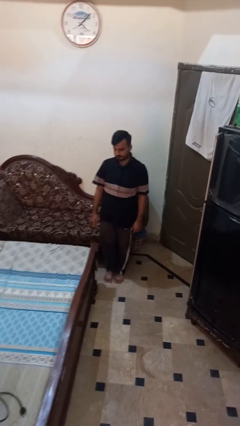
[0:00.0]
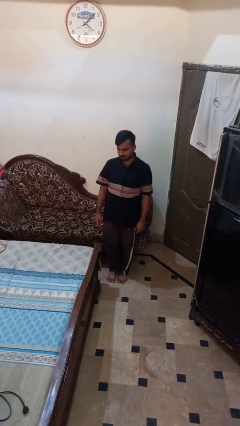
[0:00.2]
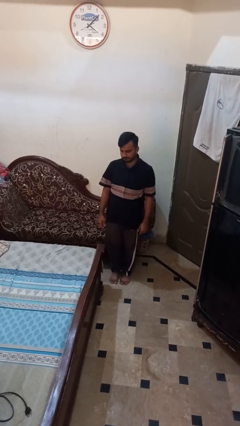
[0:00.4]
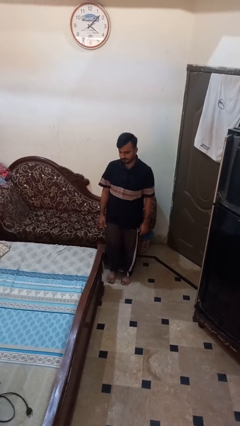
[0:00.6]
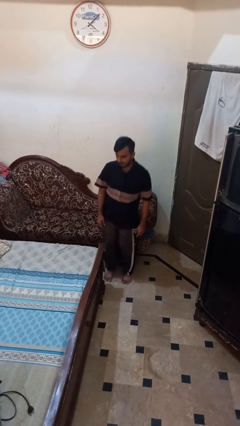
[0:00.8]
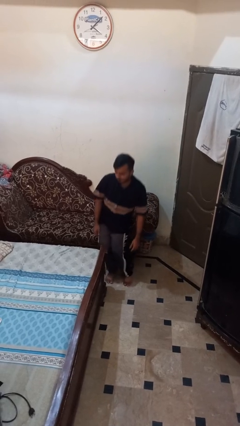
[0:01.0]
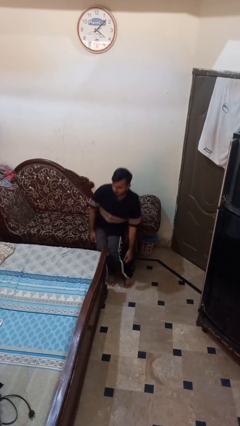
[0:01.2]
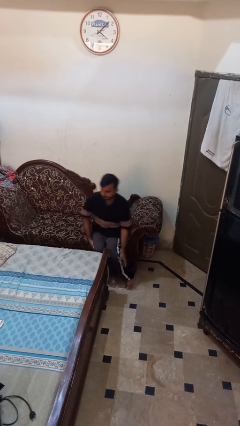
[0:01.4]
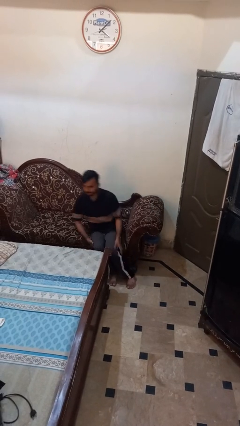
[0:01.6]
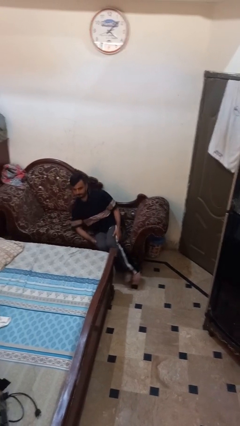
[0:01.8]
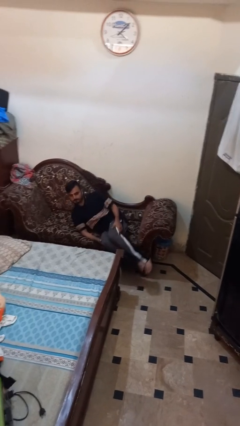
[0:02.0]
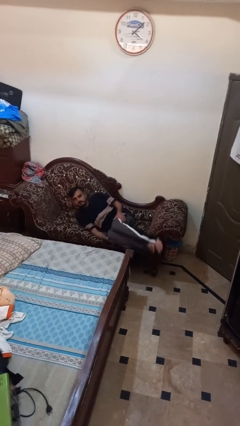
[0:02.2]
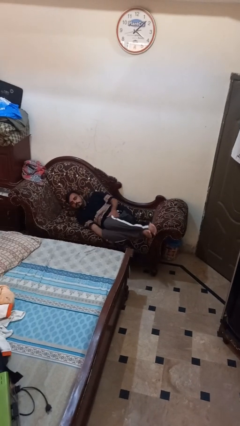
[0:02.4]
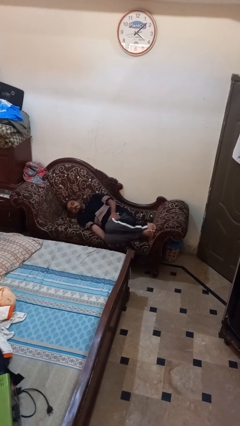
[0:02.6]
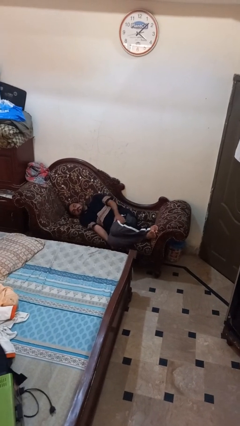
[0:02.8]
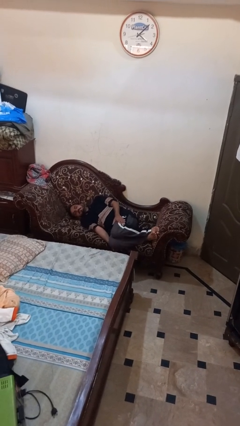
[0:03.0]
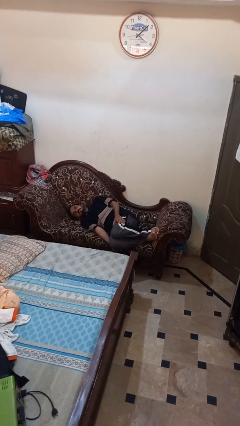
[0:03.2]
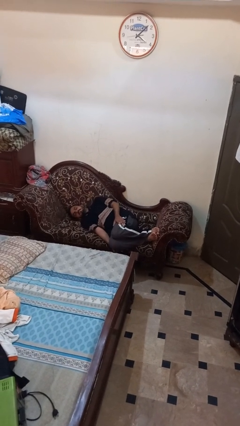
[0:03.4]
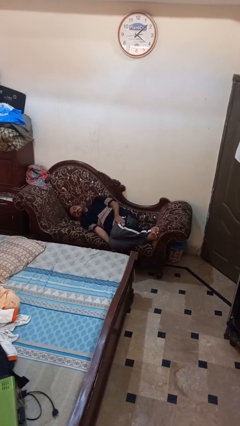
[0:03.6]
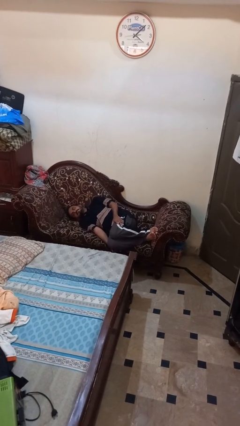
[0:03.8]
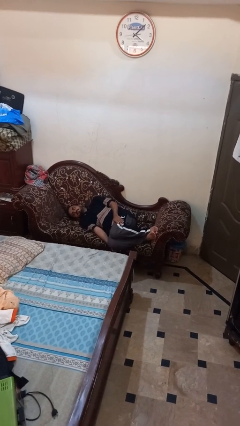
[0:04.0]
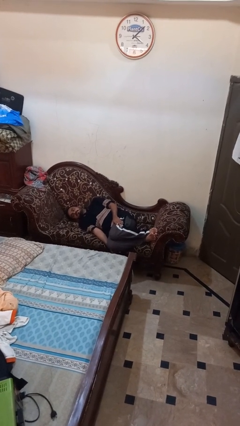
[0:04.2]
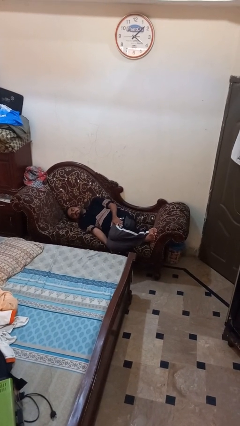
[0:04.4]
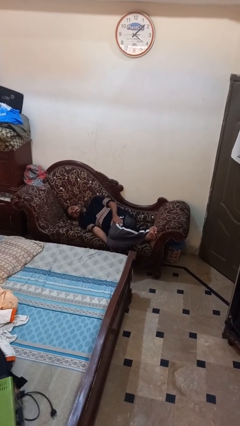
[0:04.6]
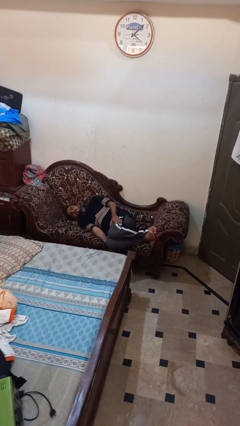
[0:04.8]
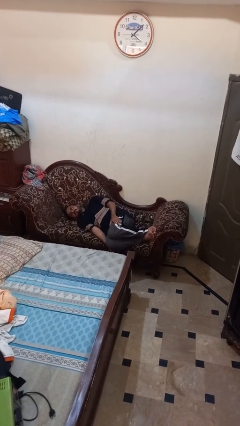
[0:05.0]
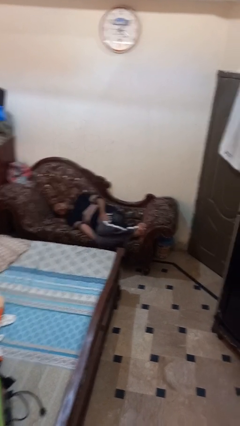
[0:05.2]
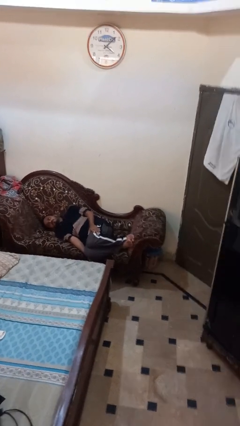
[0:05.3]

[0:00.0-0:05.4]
person lies down on couch

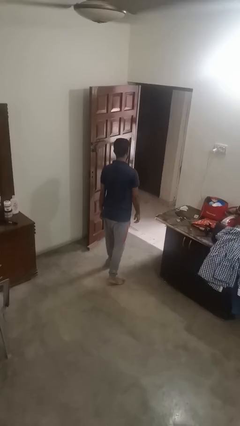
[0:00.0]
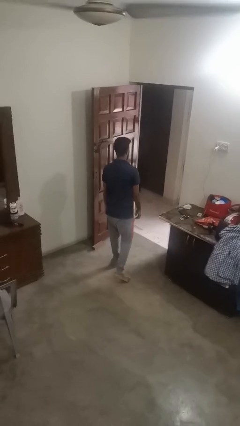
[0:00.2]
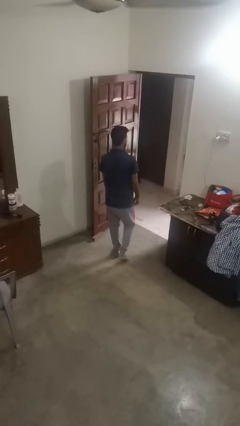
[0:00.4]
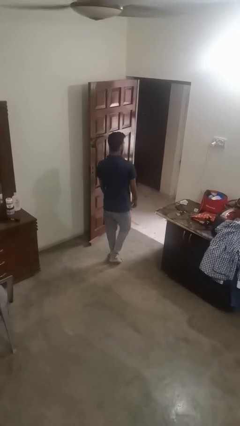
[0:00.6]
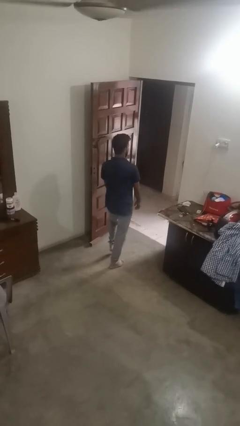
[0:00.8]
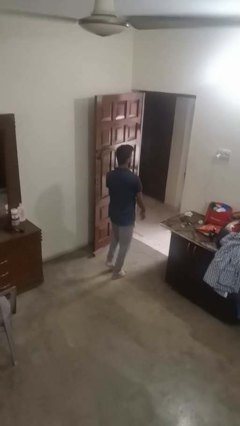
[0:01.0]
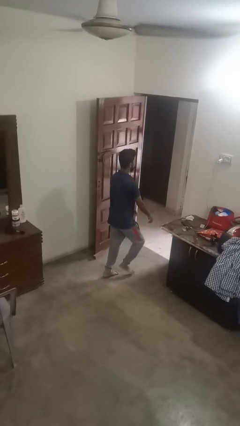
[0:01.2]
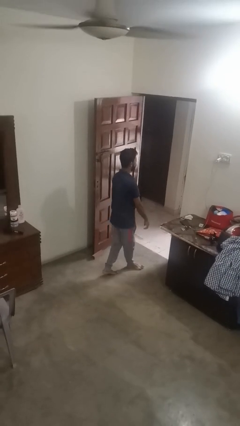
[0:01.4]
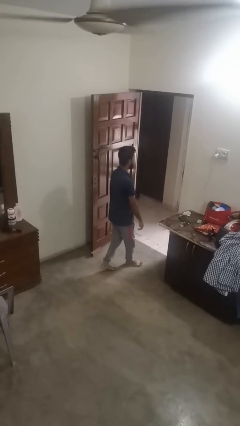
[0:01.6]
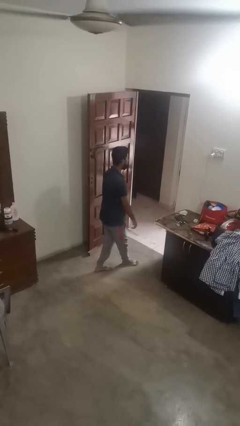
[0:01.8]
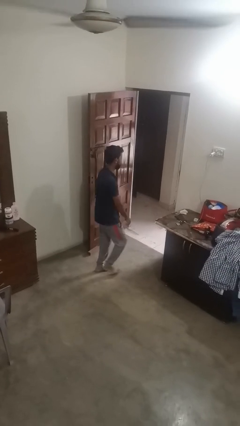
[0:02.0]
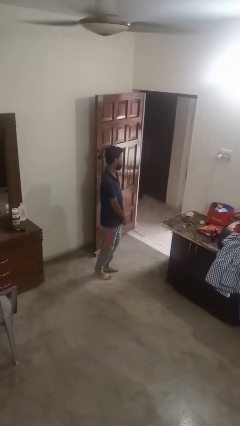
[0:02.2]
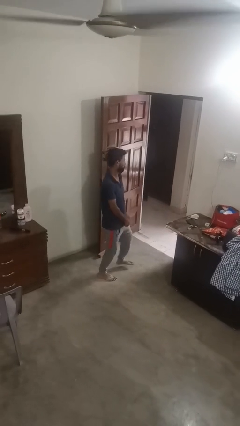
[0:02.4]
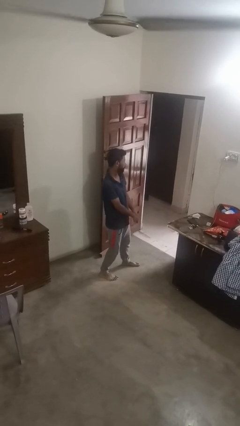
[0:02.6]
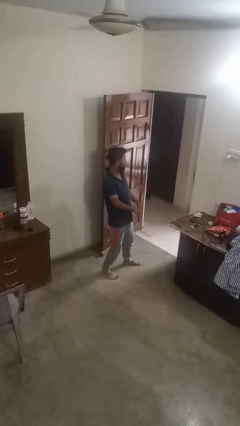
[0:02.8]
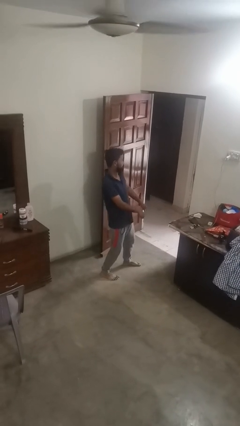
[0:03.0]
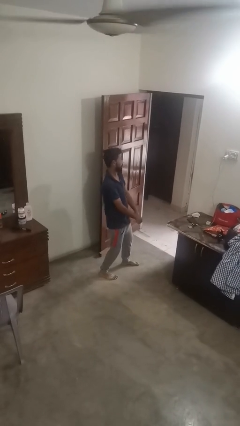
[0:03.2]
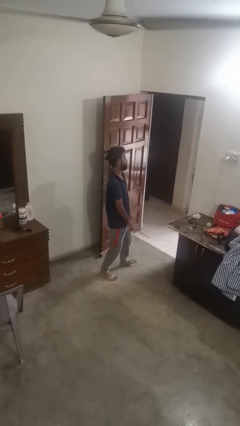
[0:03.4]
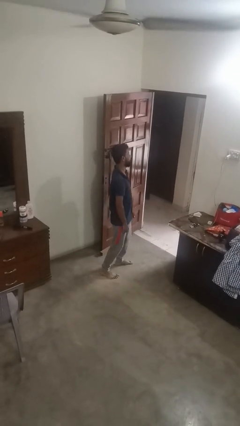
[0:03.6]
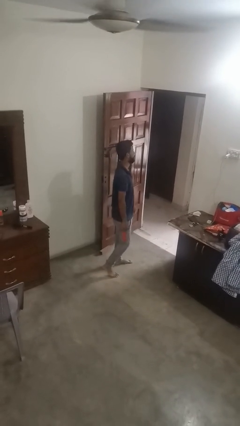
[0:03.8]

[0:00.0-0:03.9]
person dances in place

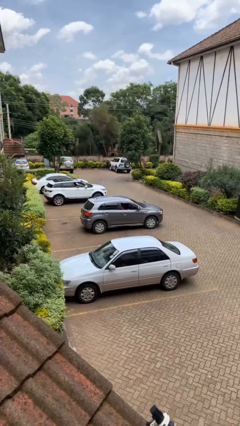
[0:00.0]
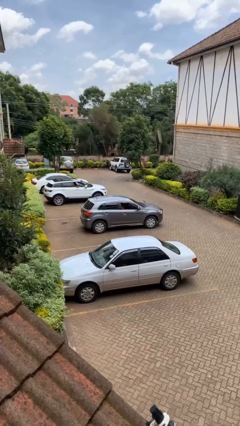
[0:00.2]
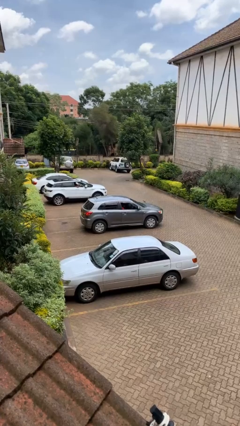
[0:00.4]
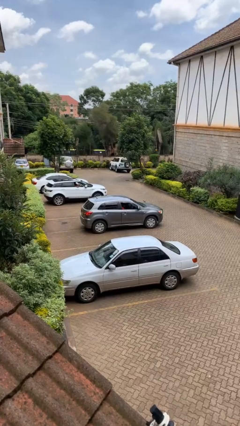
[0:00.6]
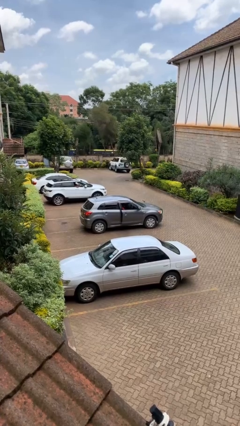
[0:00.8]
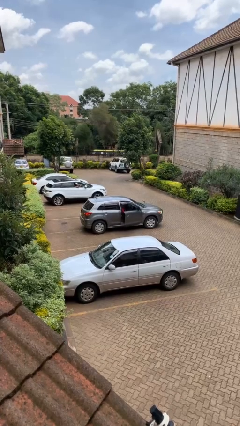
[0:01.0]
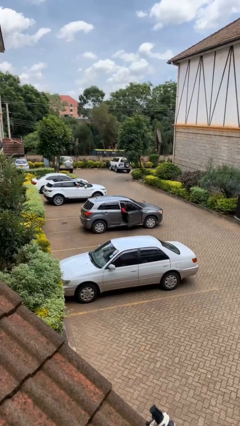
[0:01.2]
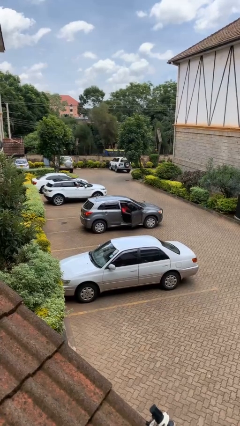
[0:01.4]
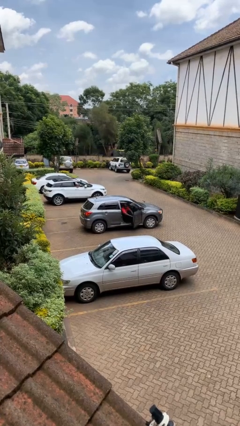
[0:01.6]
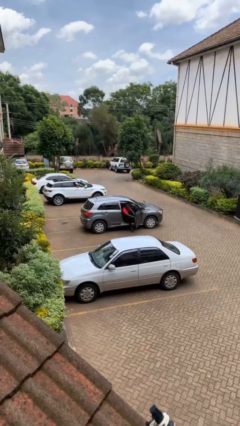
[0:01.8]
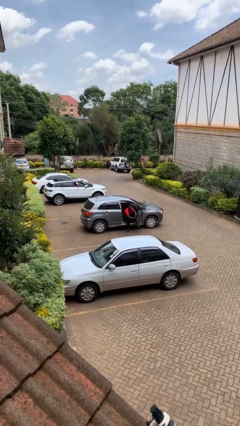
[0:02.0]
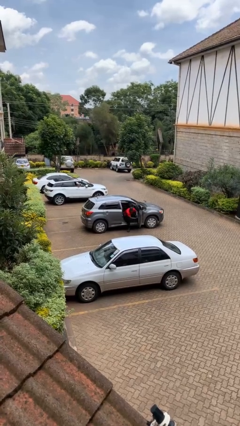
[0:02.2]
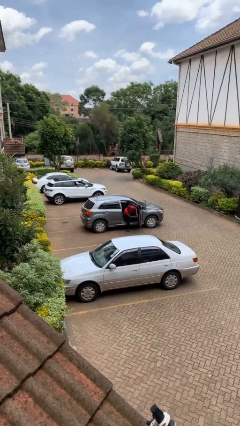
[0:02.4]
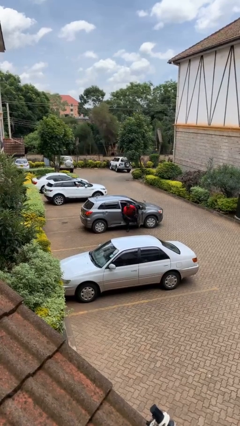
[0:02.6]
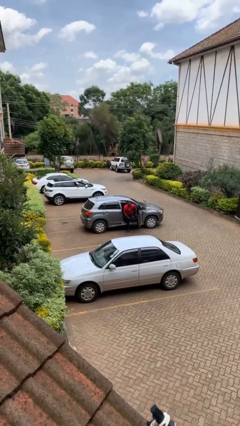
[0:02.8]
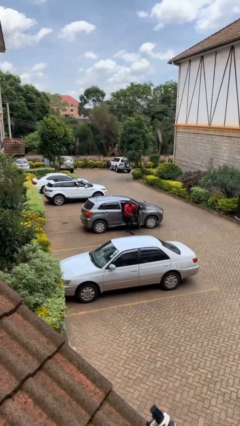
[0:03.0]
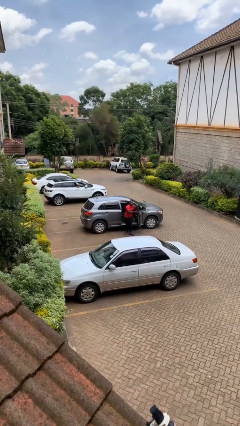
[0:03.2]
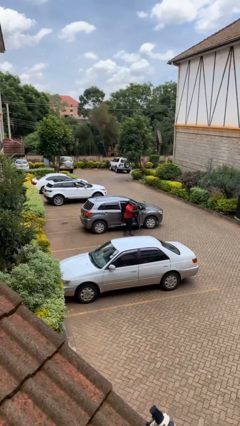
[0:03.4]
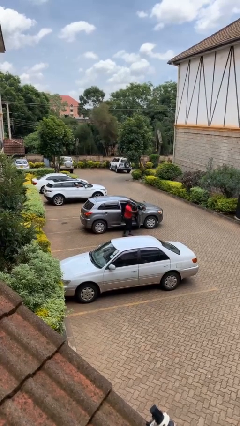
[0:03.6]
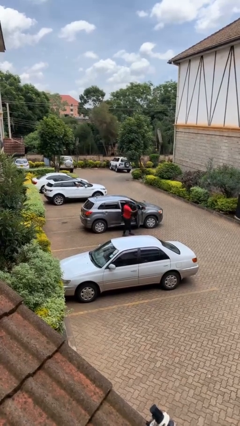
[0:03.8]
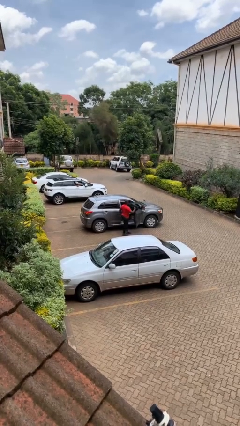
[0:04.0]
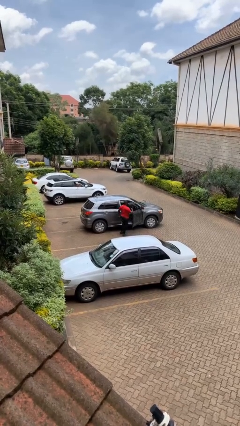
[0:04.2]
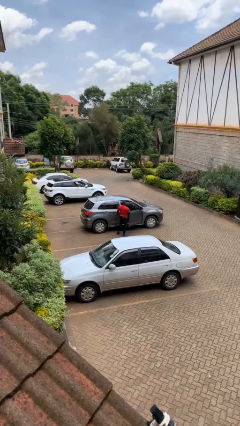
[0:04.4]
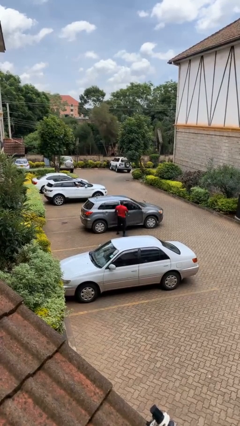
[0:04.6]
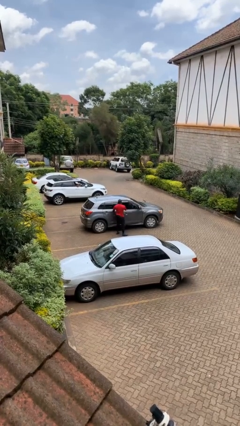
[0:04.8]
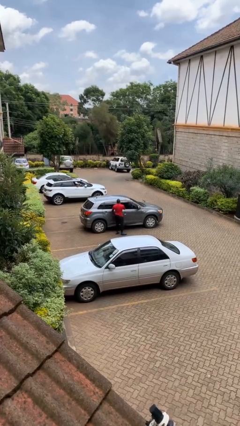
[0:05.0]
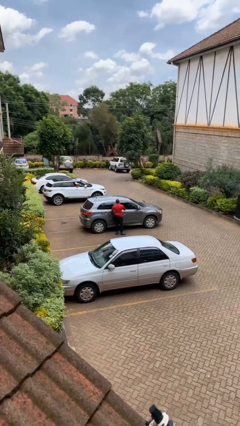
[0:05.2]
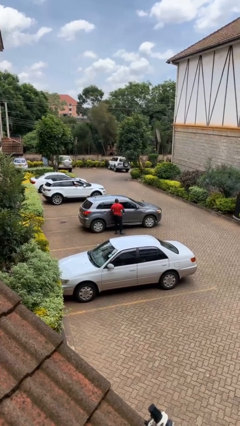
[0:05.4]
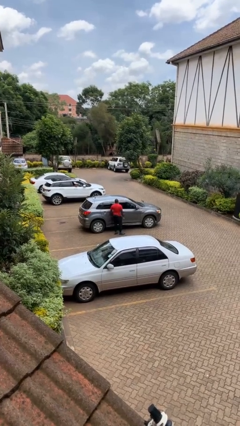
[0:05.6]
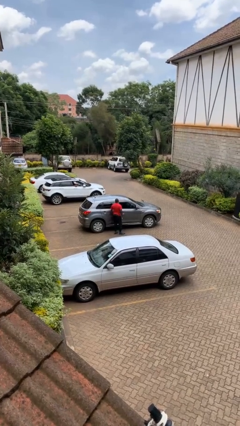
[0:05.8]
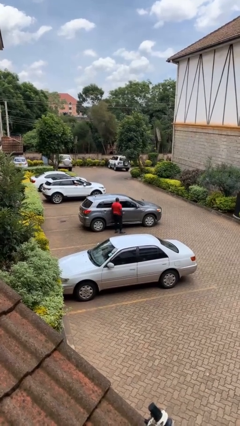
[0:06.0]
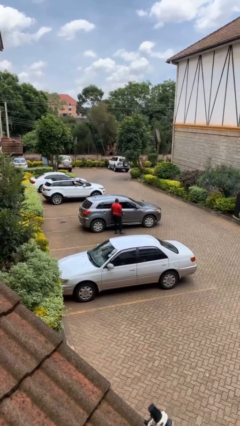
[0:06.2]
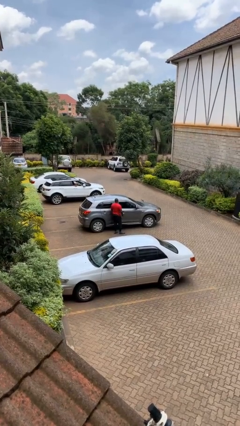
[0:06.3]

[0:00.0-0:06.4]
car drops off person

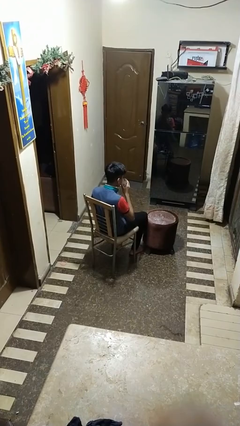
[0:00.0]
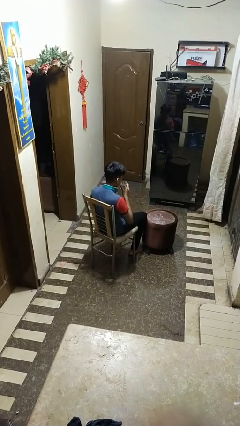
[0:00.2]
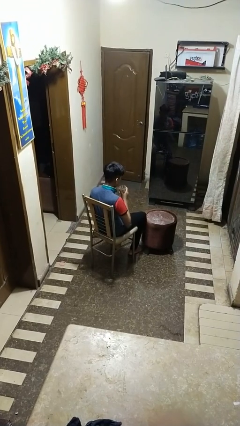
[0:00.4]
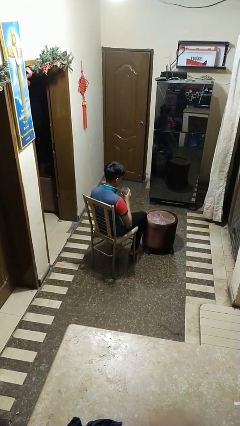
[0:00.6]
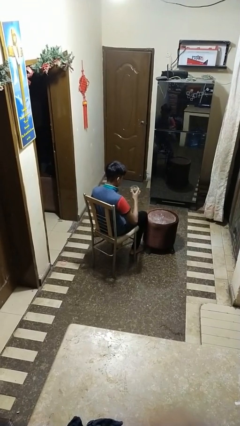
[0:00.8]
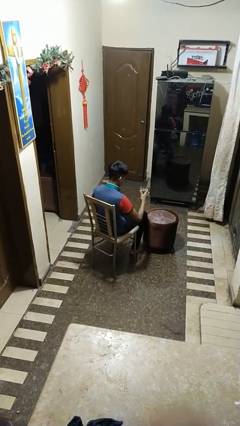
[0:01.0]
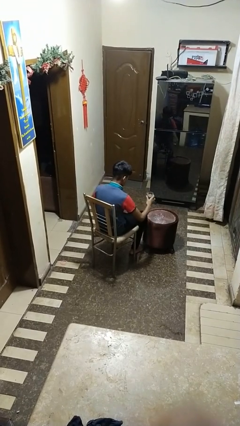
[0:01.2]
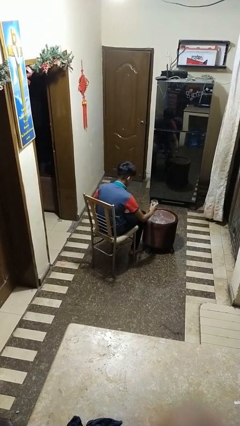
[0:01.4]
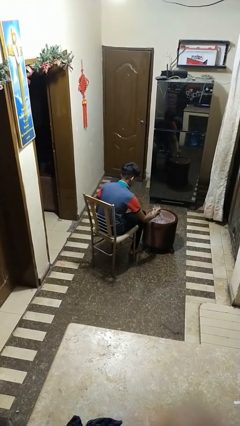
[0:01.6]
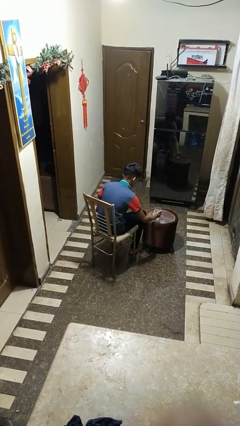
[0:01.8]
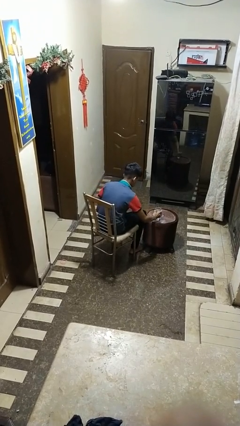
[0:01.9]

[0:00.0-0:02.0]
person puts down object on table

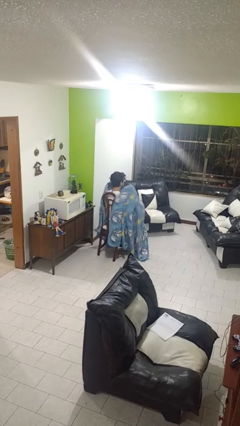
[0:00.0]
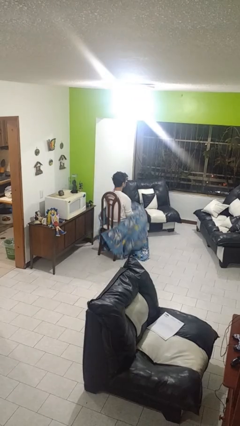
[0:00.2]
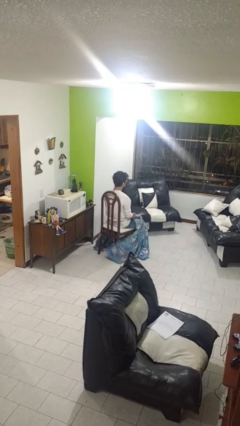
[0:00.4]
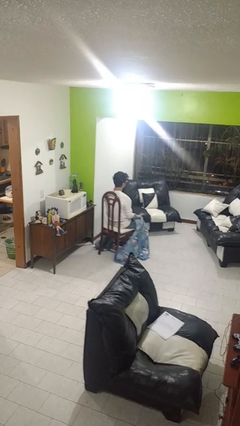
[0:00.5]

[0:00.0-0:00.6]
person uncovers with blanket
